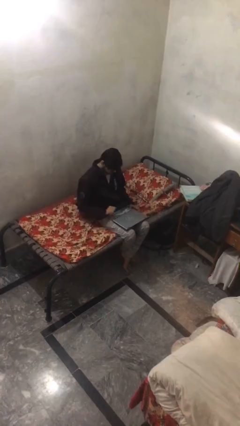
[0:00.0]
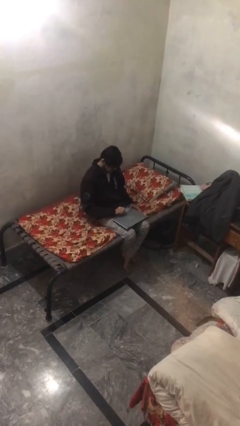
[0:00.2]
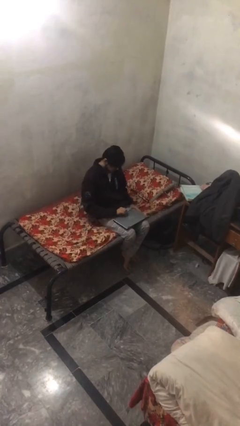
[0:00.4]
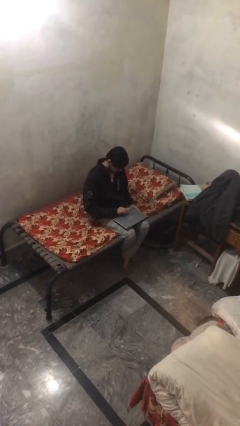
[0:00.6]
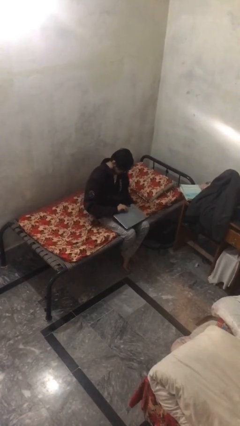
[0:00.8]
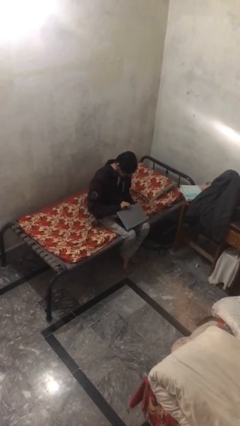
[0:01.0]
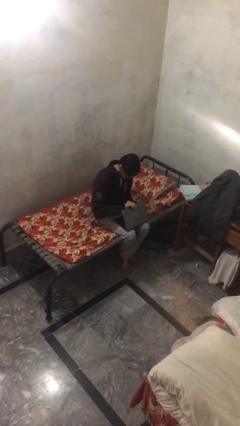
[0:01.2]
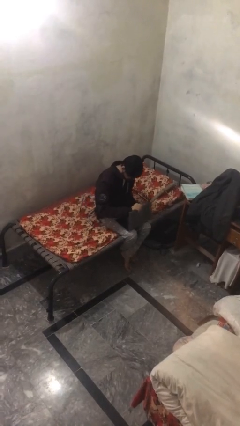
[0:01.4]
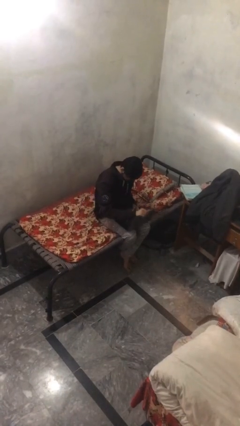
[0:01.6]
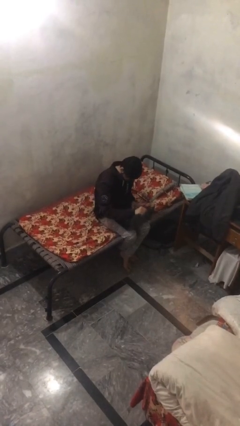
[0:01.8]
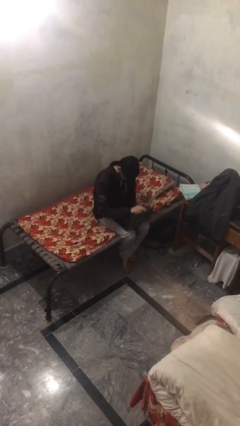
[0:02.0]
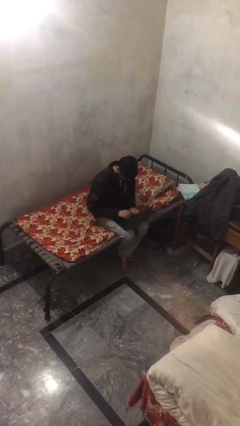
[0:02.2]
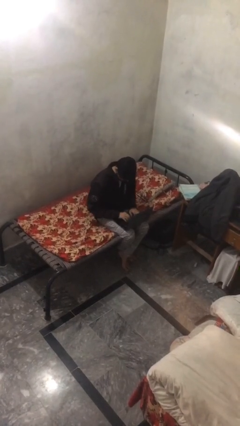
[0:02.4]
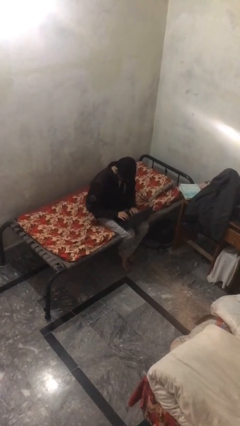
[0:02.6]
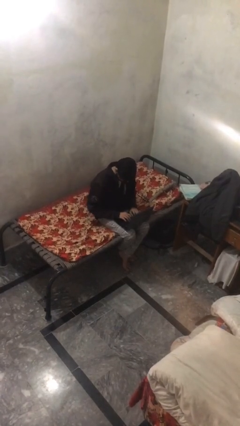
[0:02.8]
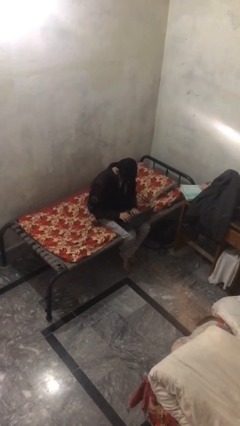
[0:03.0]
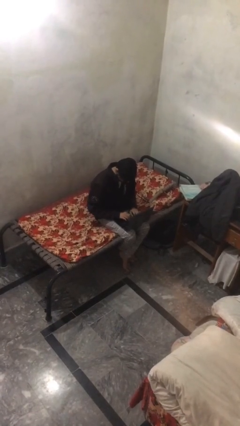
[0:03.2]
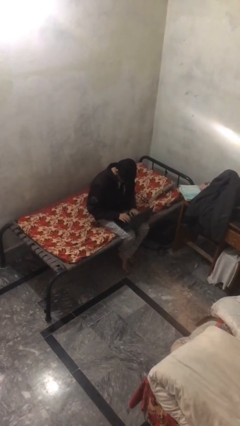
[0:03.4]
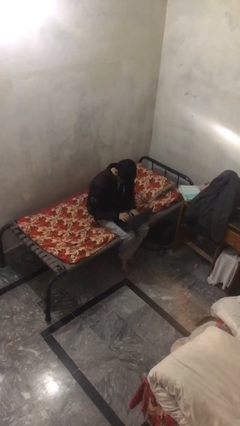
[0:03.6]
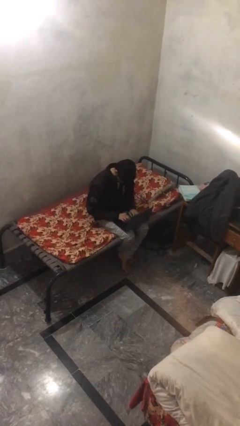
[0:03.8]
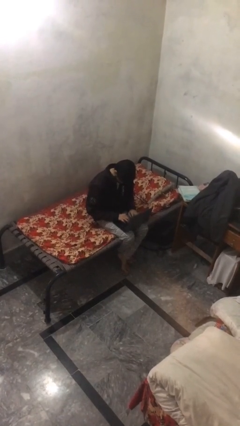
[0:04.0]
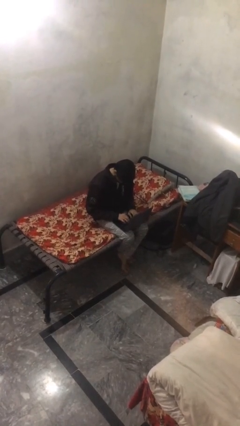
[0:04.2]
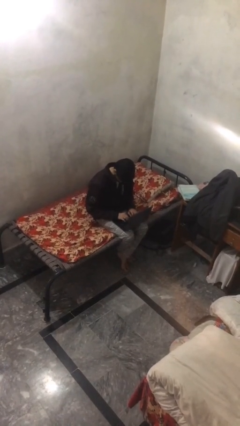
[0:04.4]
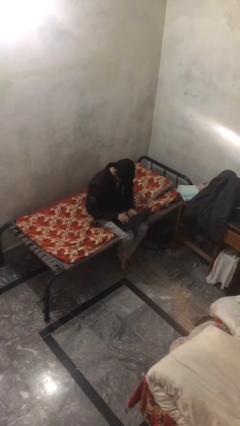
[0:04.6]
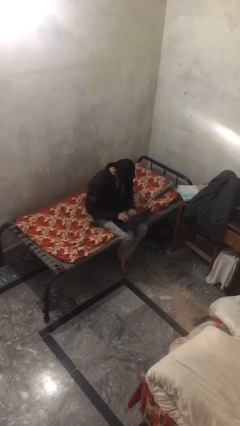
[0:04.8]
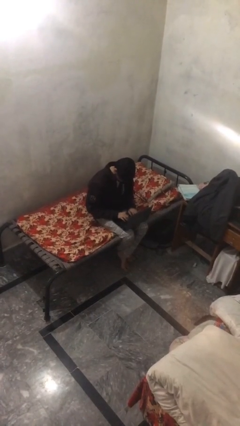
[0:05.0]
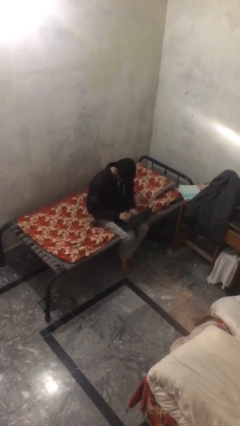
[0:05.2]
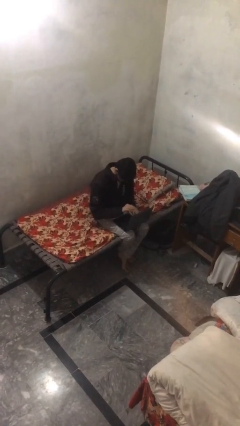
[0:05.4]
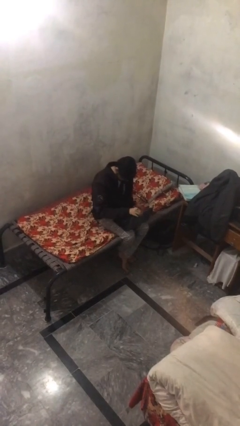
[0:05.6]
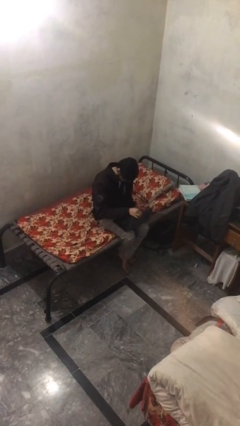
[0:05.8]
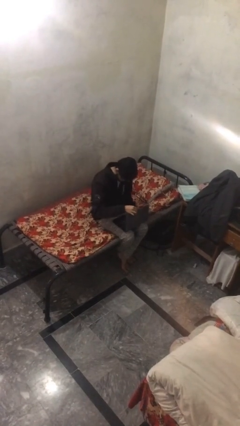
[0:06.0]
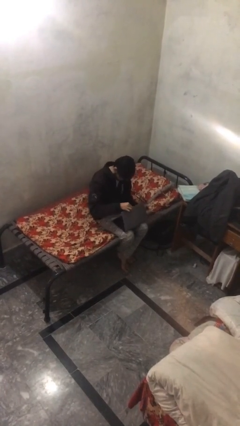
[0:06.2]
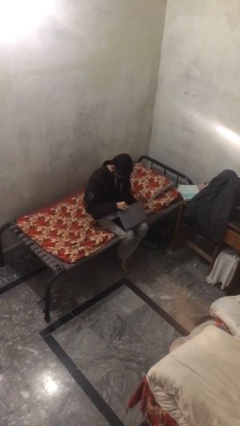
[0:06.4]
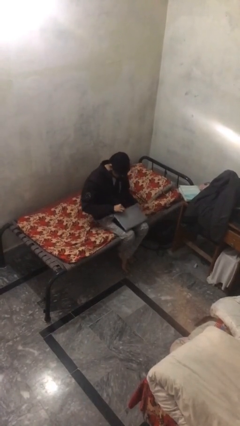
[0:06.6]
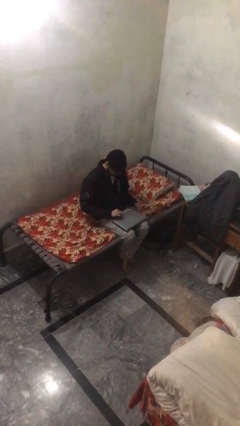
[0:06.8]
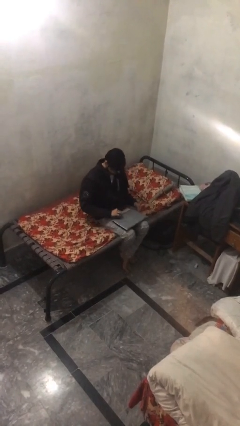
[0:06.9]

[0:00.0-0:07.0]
person interacts with laptop

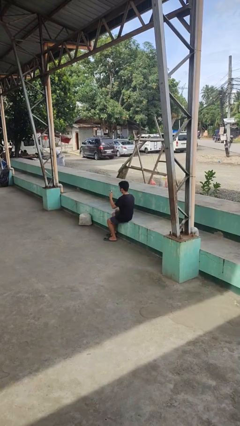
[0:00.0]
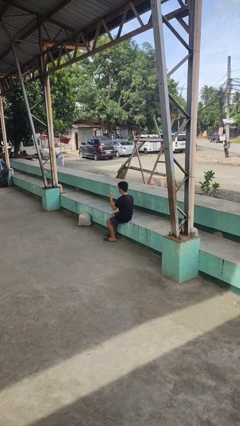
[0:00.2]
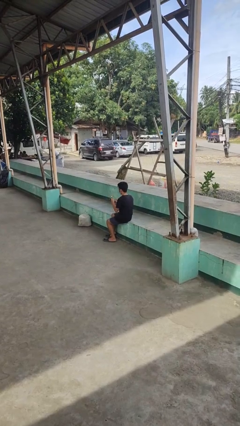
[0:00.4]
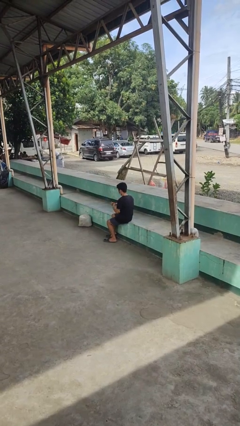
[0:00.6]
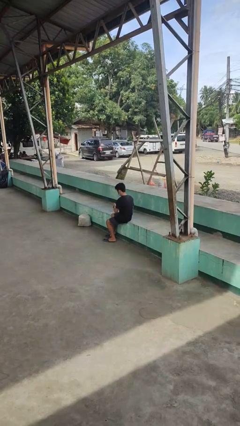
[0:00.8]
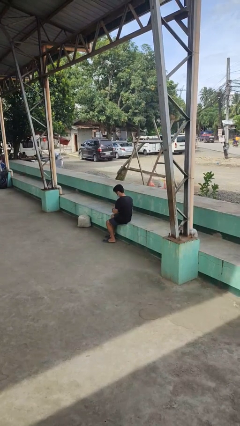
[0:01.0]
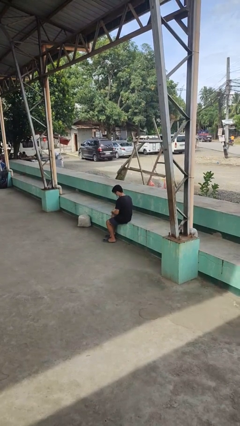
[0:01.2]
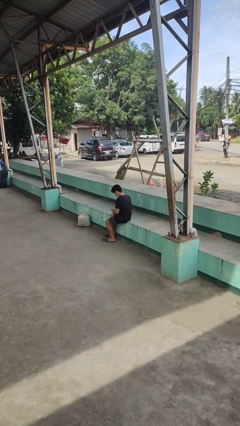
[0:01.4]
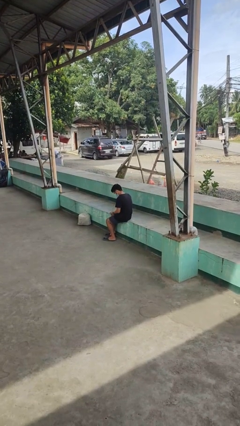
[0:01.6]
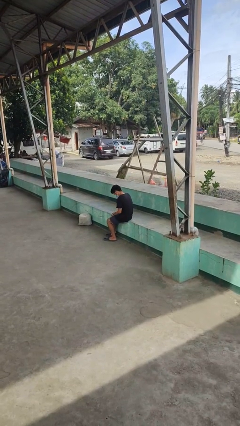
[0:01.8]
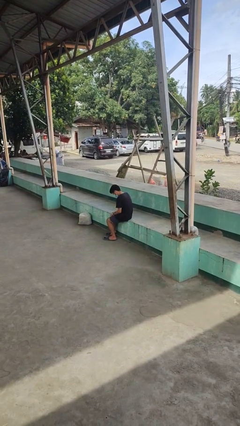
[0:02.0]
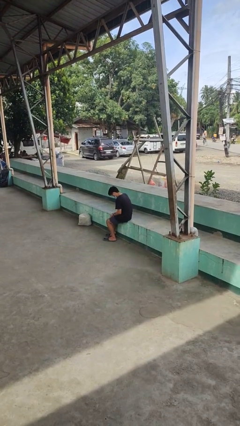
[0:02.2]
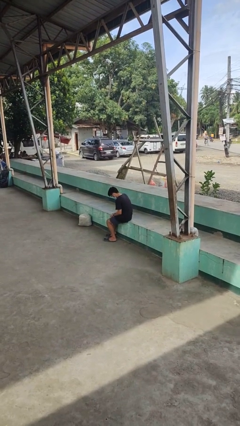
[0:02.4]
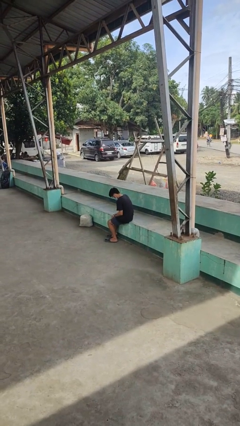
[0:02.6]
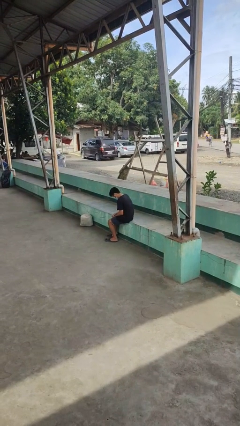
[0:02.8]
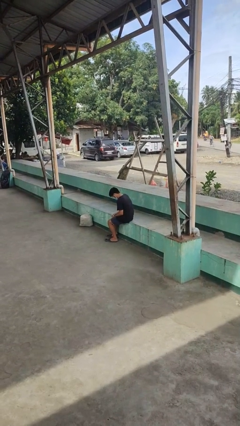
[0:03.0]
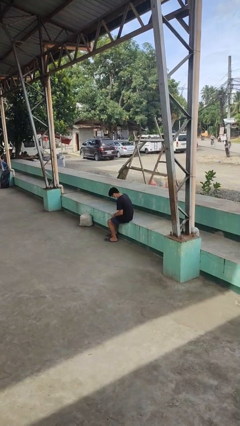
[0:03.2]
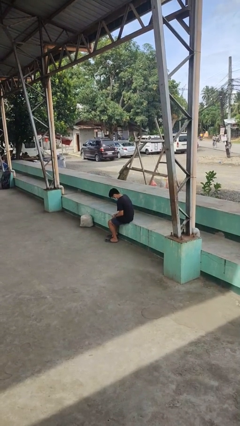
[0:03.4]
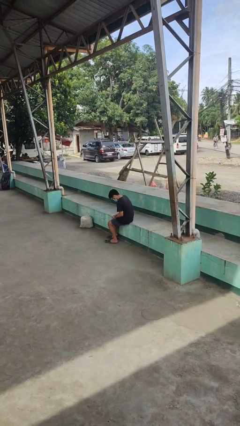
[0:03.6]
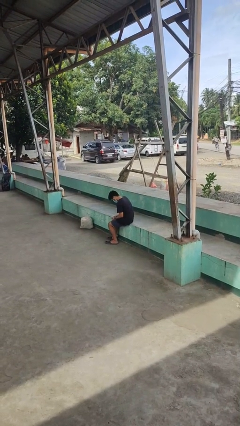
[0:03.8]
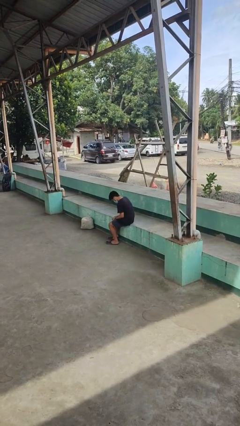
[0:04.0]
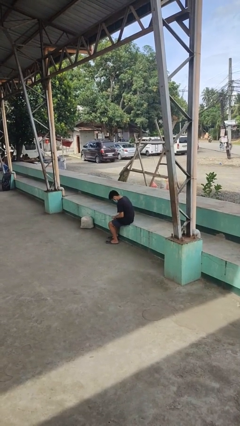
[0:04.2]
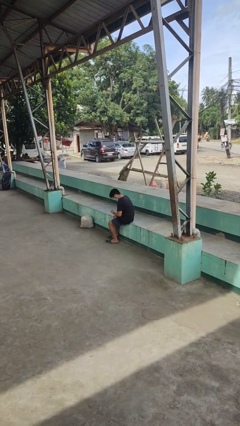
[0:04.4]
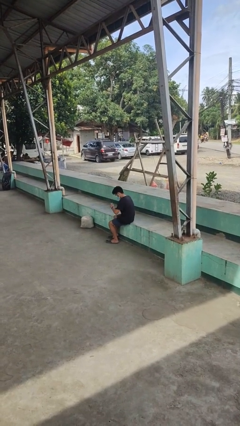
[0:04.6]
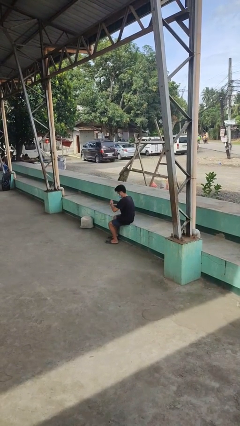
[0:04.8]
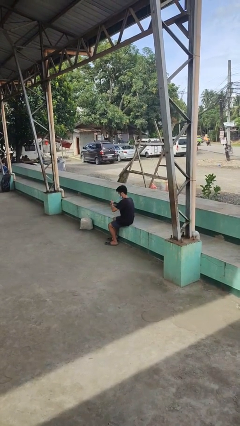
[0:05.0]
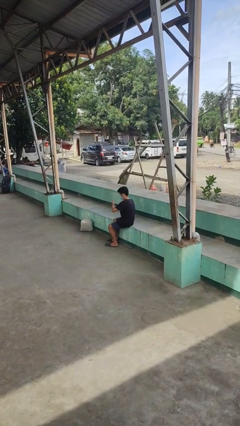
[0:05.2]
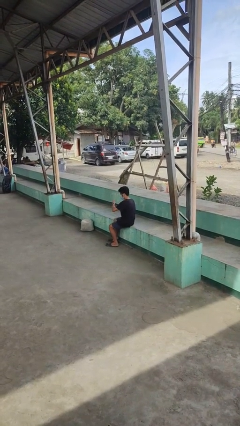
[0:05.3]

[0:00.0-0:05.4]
person puts on wristwatch

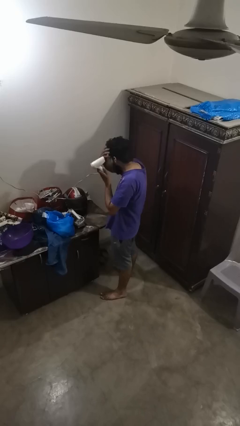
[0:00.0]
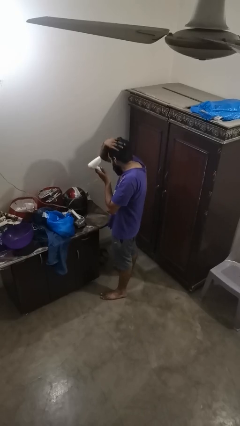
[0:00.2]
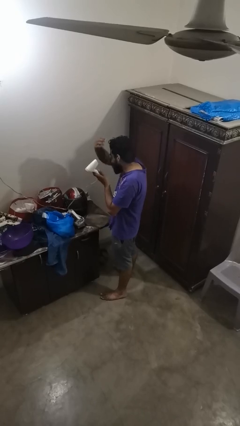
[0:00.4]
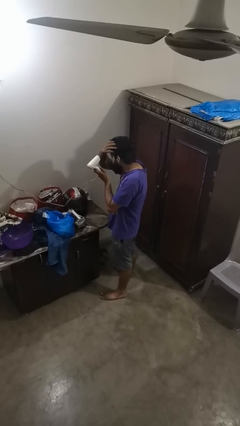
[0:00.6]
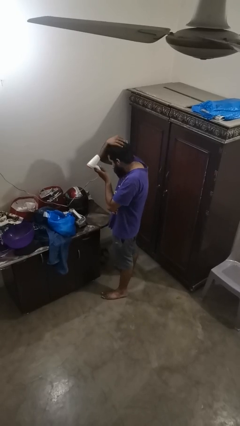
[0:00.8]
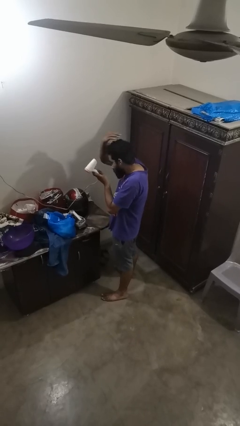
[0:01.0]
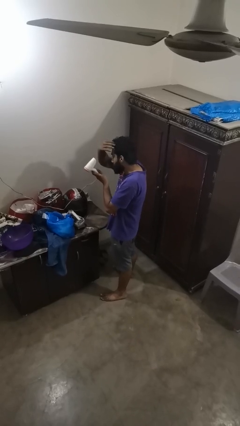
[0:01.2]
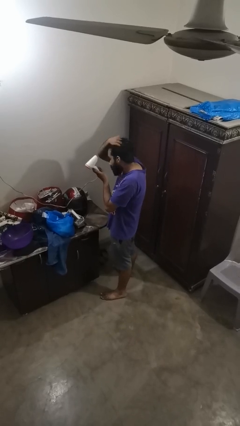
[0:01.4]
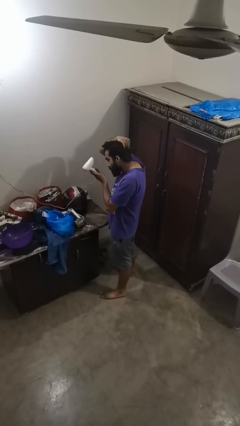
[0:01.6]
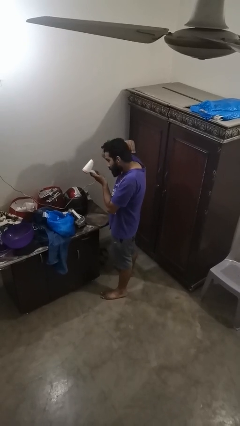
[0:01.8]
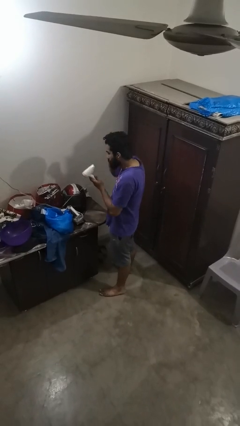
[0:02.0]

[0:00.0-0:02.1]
person dries hair with hairdryer

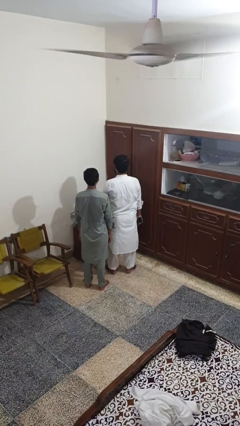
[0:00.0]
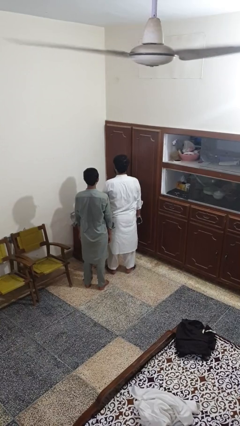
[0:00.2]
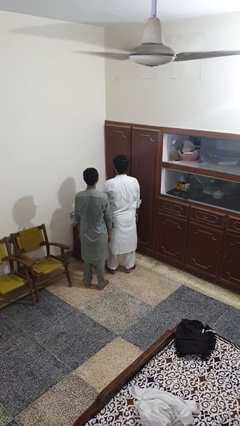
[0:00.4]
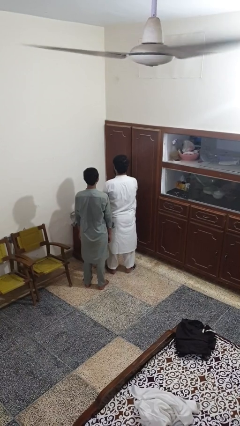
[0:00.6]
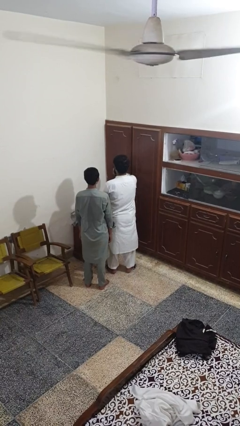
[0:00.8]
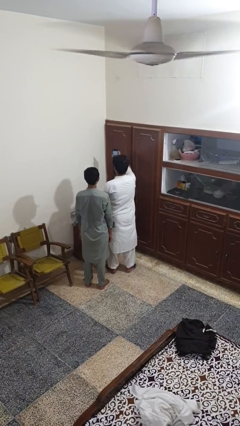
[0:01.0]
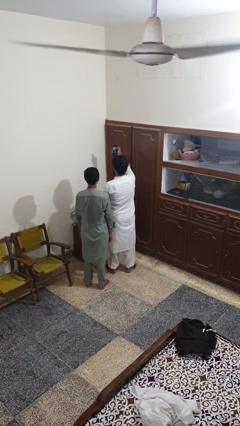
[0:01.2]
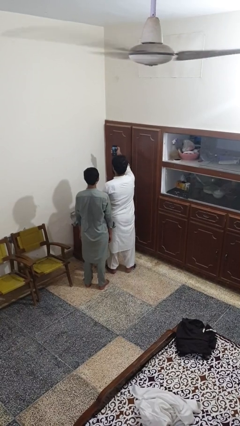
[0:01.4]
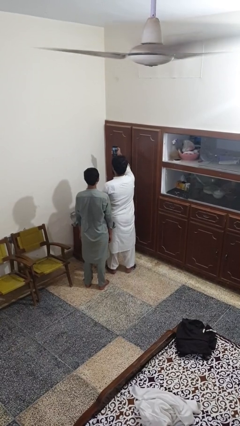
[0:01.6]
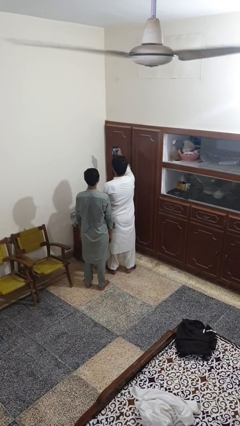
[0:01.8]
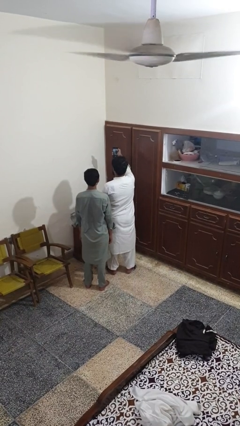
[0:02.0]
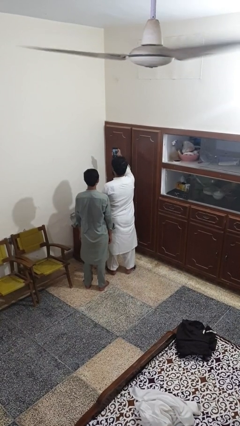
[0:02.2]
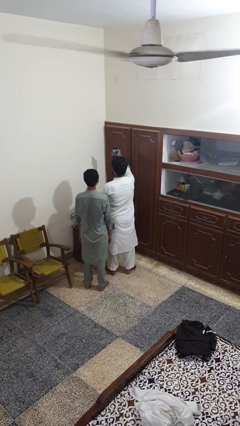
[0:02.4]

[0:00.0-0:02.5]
person takes selfie with person

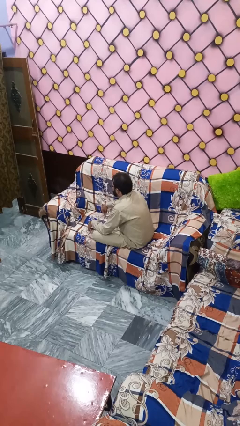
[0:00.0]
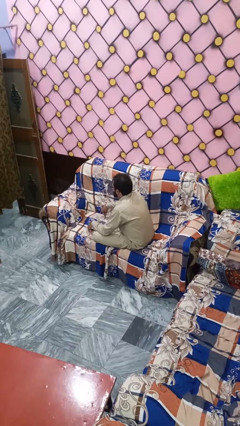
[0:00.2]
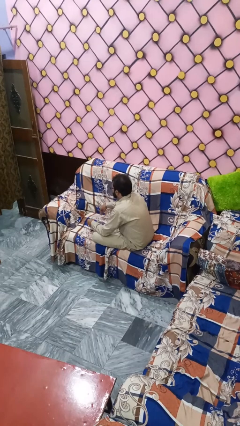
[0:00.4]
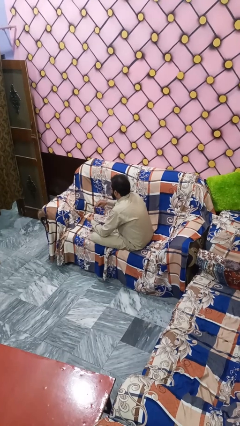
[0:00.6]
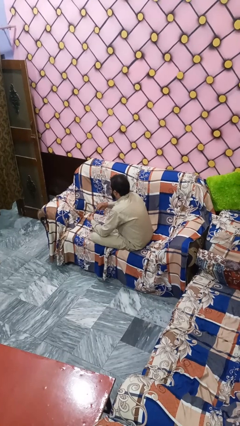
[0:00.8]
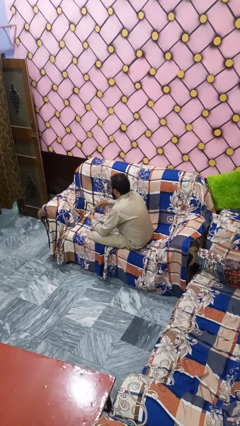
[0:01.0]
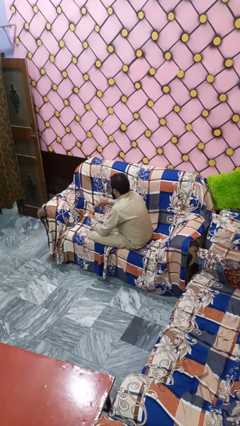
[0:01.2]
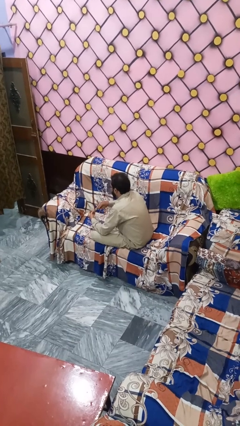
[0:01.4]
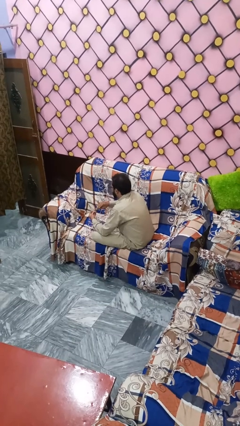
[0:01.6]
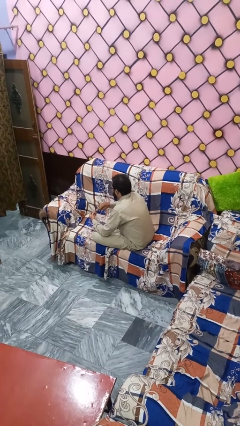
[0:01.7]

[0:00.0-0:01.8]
person paints fingernails
